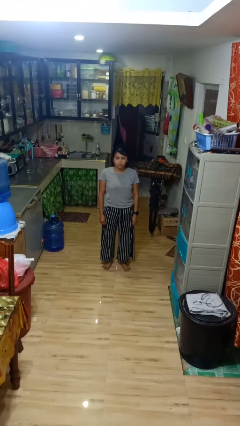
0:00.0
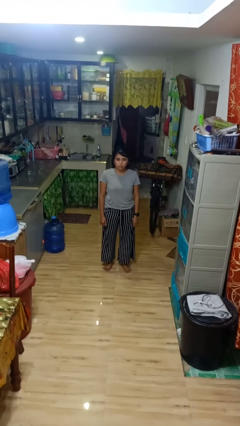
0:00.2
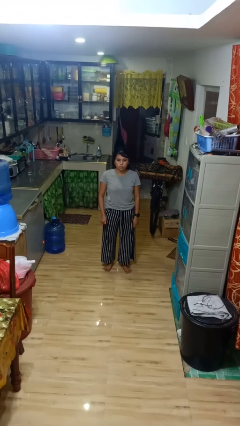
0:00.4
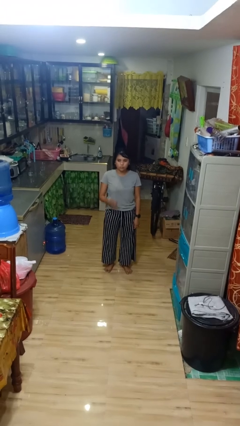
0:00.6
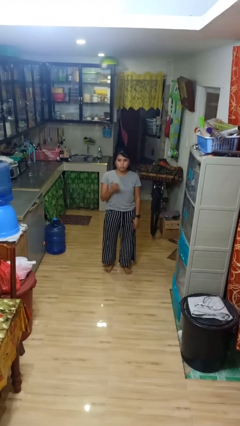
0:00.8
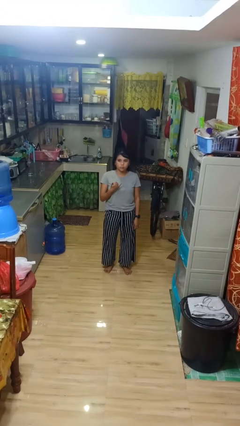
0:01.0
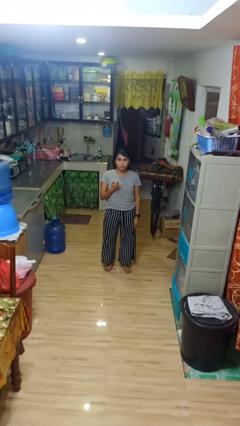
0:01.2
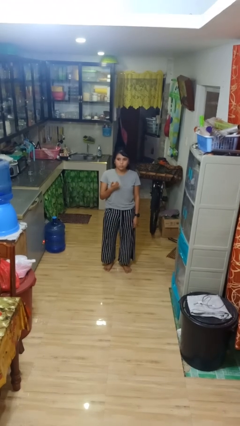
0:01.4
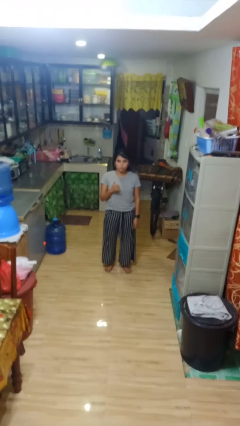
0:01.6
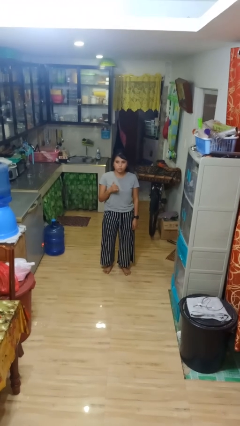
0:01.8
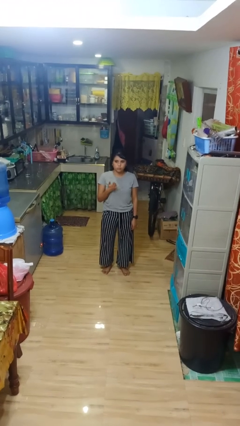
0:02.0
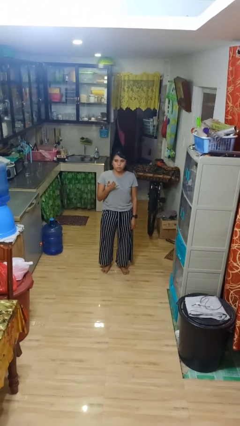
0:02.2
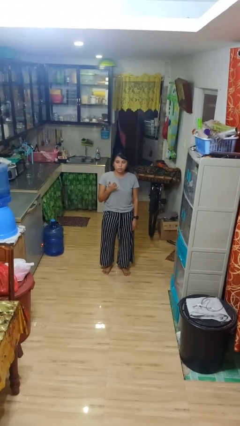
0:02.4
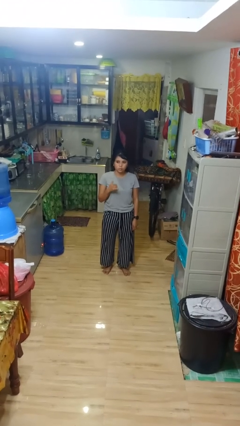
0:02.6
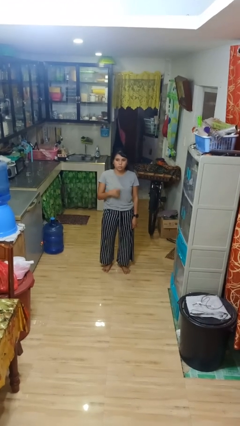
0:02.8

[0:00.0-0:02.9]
person gestures hang loose

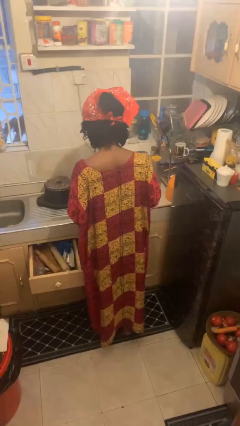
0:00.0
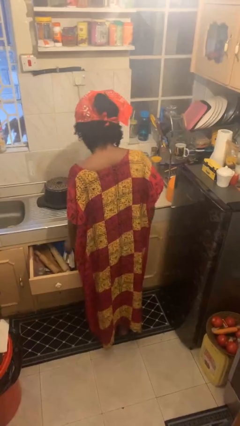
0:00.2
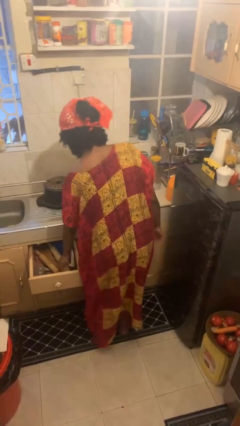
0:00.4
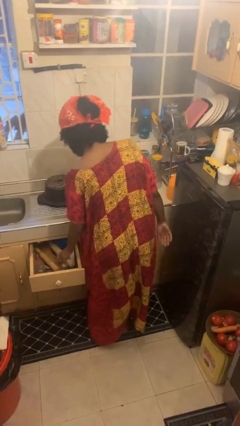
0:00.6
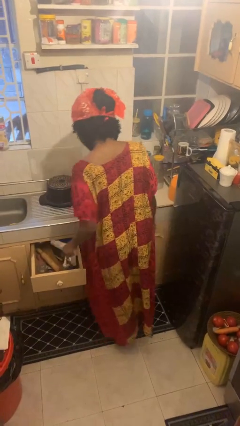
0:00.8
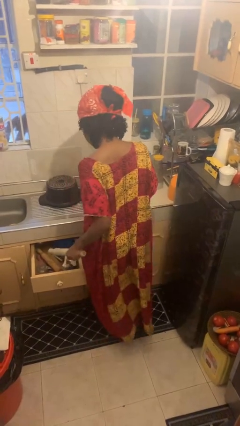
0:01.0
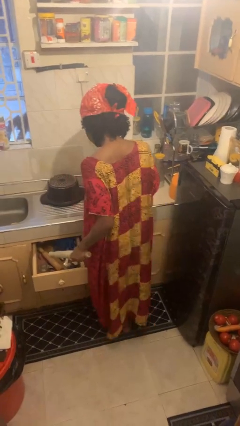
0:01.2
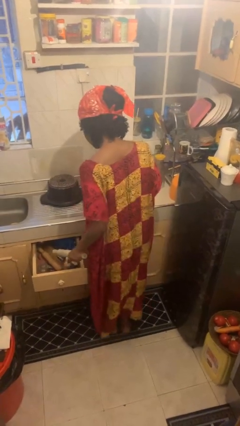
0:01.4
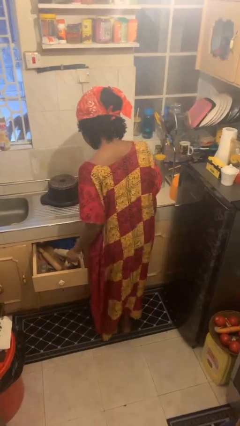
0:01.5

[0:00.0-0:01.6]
person takes object from kitchen drawer

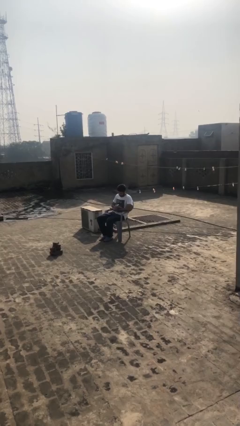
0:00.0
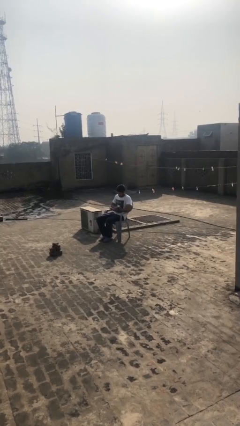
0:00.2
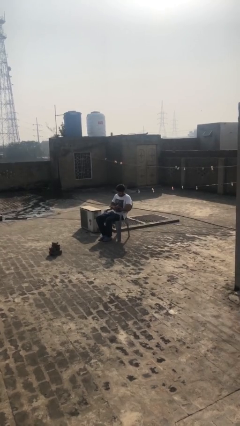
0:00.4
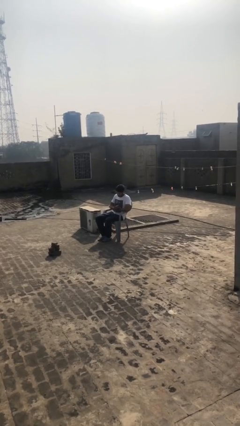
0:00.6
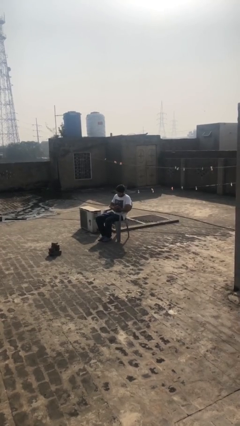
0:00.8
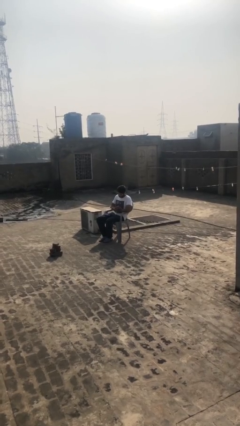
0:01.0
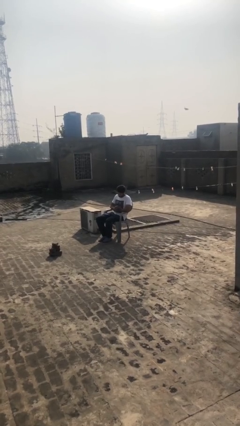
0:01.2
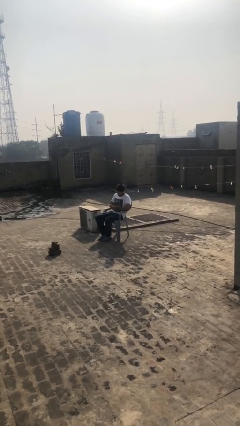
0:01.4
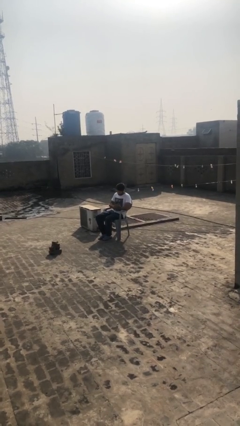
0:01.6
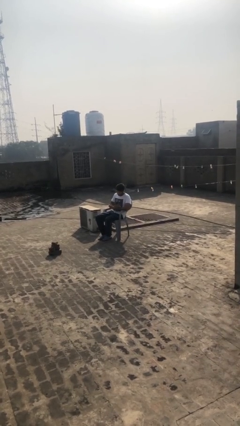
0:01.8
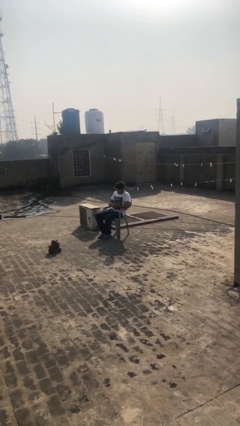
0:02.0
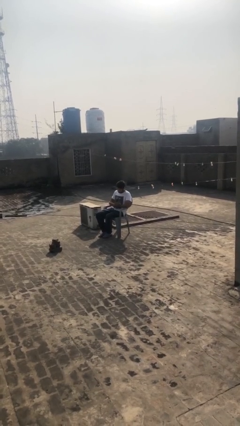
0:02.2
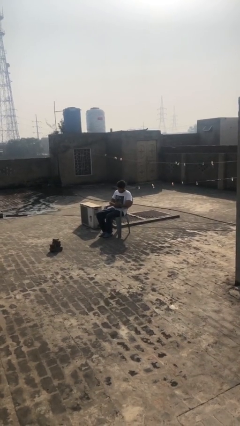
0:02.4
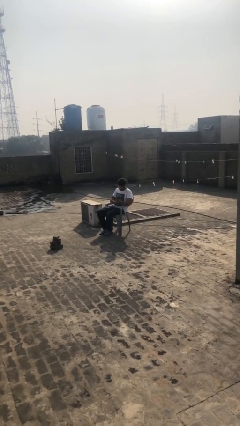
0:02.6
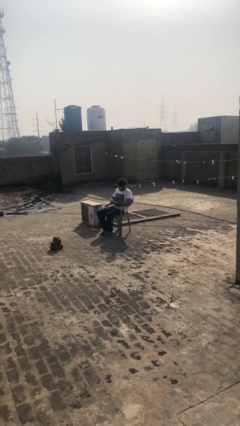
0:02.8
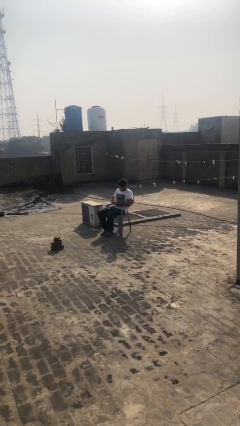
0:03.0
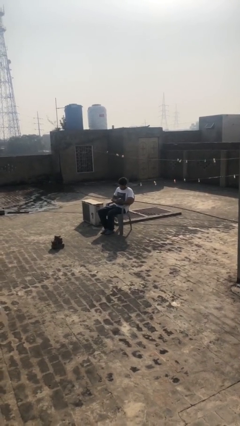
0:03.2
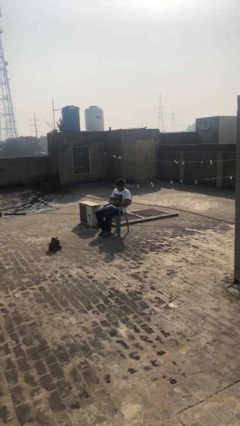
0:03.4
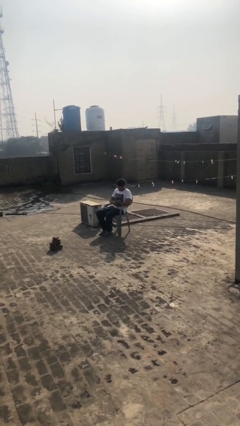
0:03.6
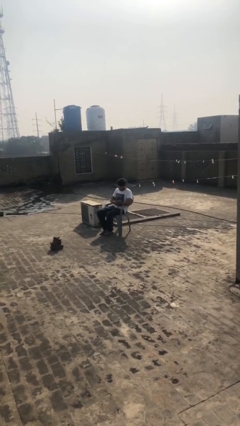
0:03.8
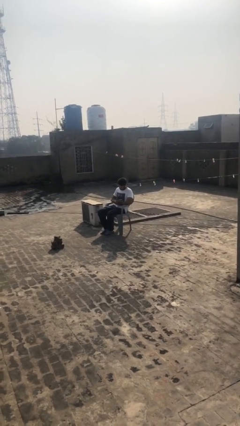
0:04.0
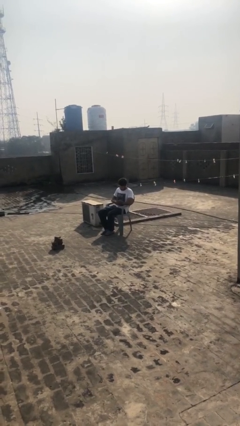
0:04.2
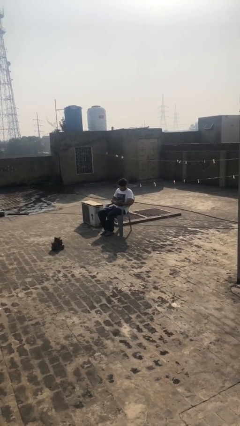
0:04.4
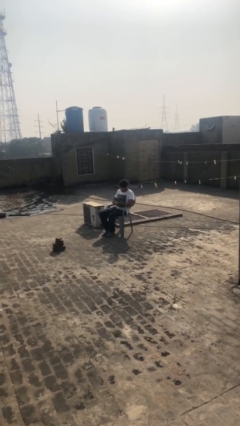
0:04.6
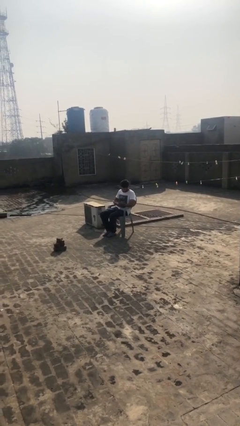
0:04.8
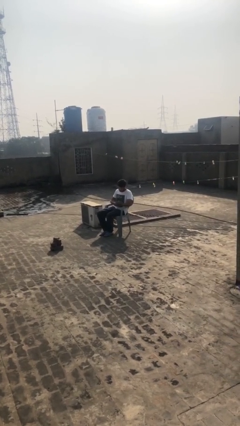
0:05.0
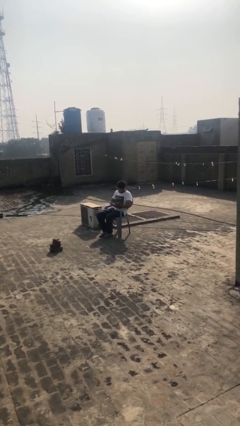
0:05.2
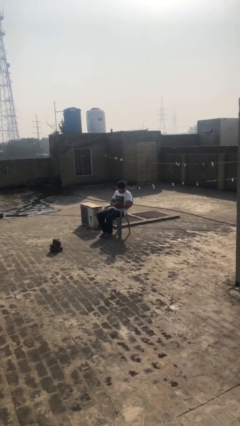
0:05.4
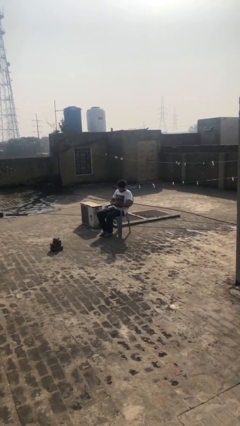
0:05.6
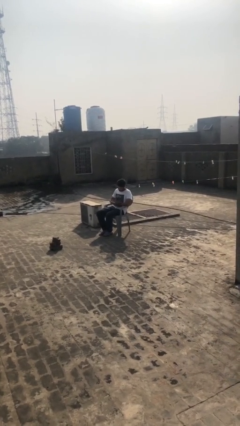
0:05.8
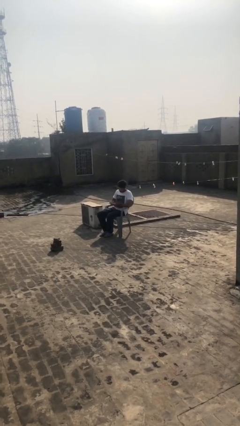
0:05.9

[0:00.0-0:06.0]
person reads document

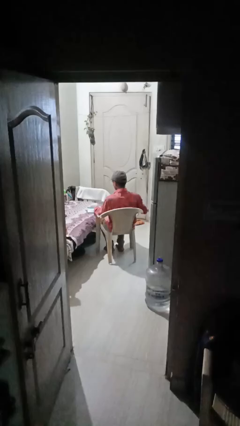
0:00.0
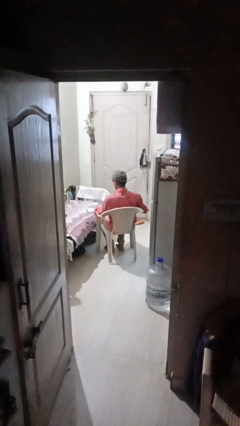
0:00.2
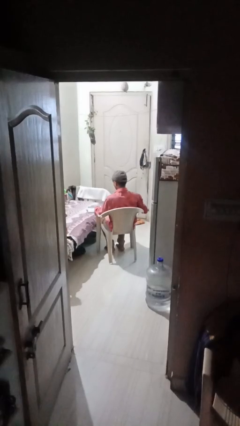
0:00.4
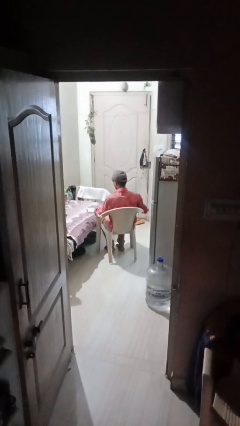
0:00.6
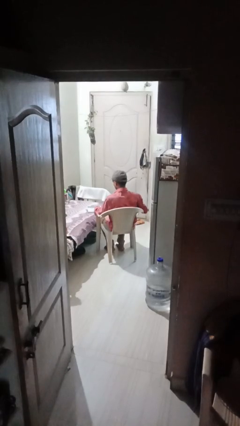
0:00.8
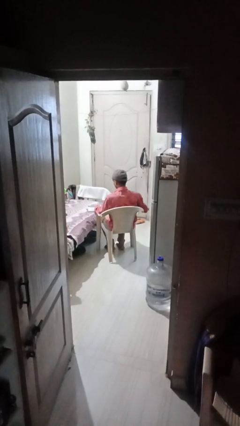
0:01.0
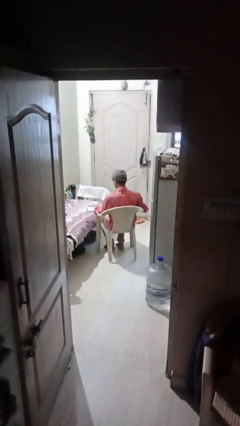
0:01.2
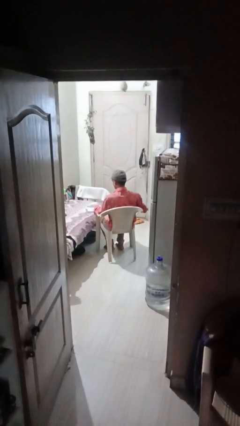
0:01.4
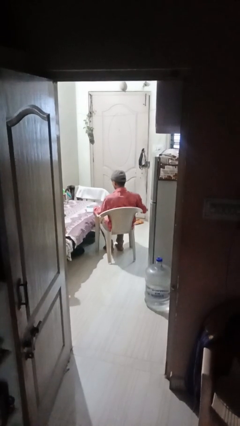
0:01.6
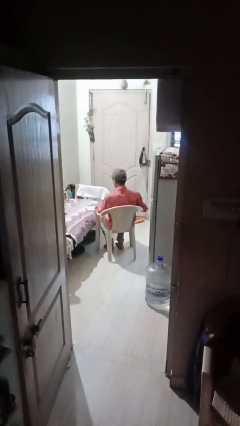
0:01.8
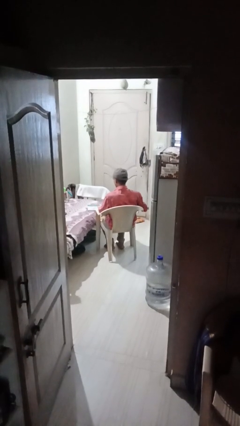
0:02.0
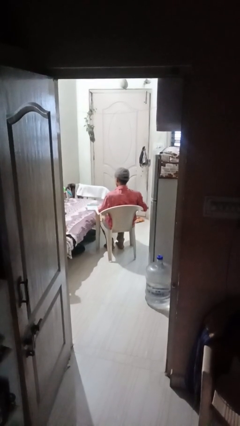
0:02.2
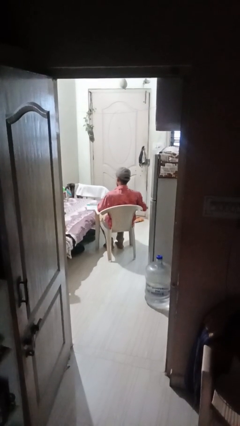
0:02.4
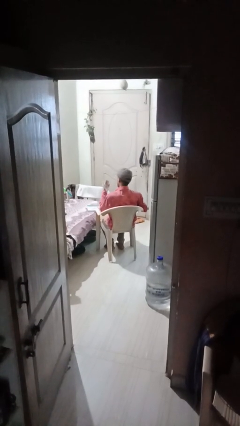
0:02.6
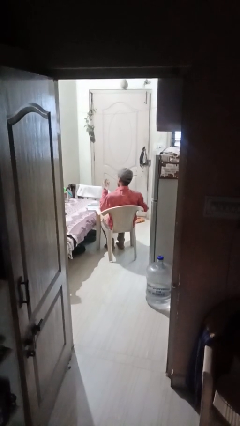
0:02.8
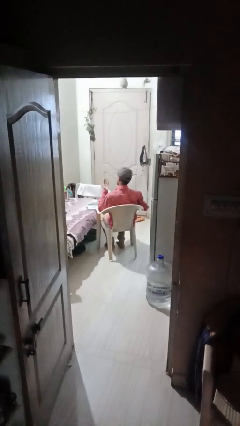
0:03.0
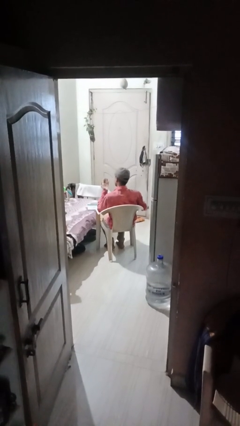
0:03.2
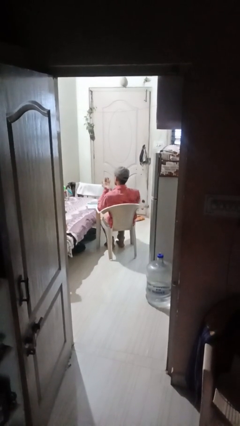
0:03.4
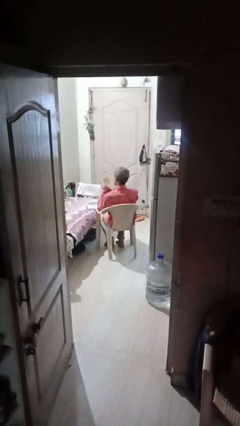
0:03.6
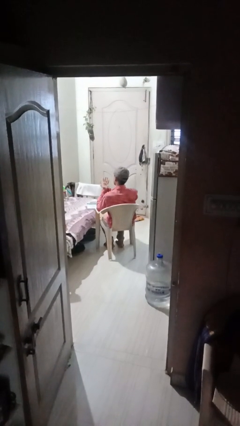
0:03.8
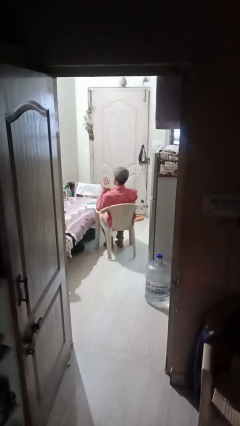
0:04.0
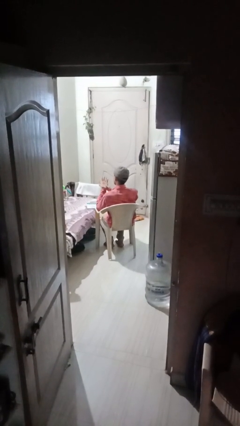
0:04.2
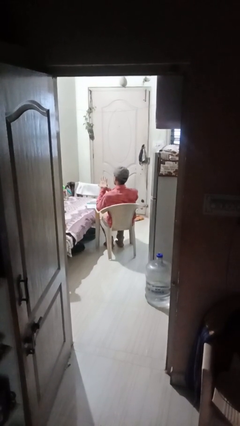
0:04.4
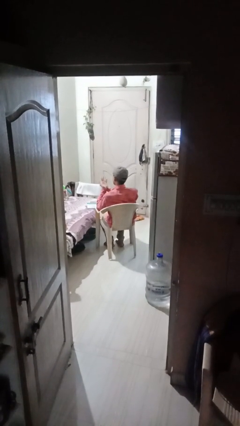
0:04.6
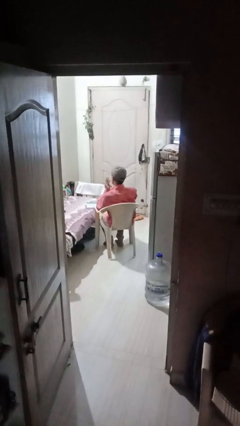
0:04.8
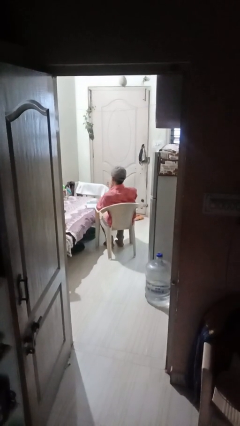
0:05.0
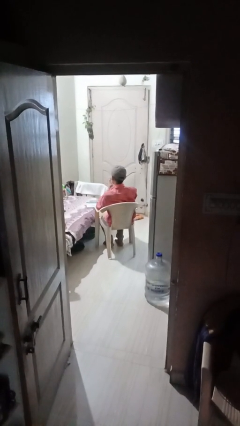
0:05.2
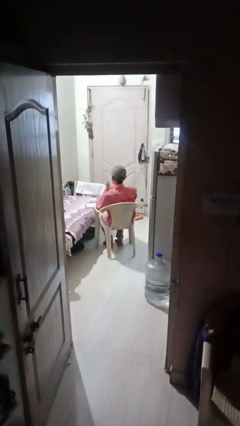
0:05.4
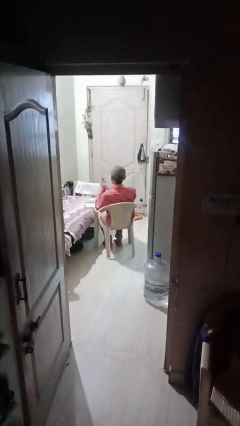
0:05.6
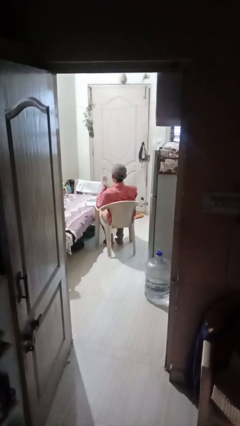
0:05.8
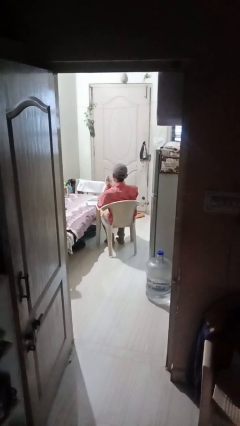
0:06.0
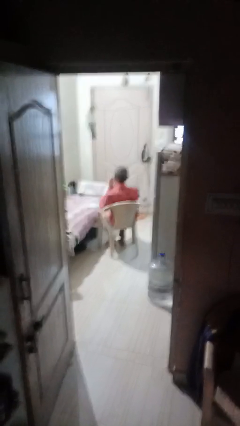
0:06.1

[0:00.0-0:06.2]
person looks at hands in lap

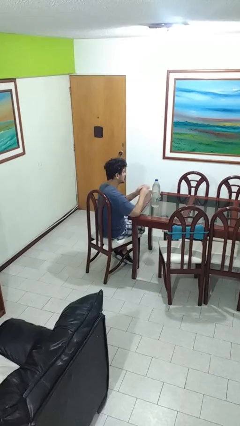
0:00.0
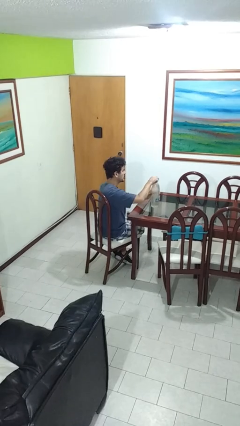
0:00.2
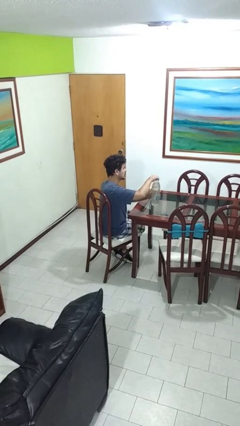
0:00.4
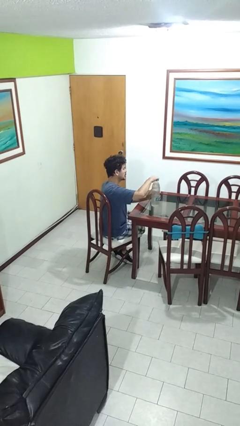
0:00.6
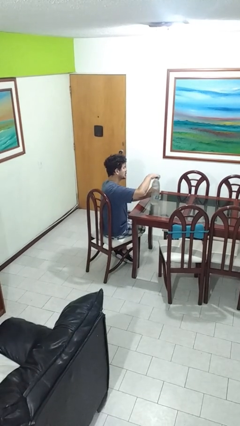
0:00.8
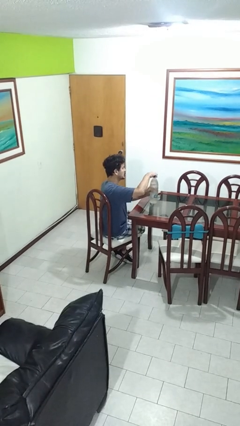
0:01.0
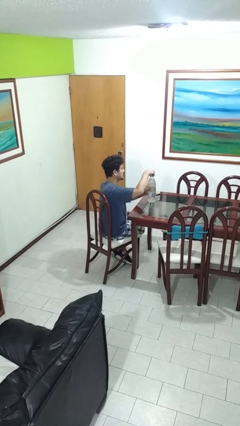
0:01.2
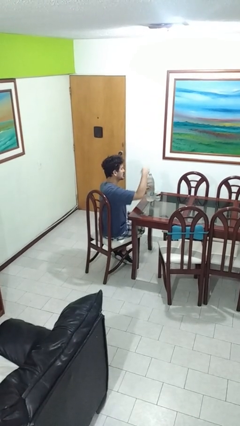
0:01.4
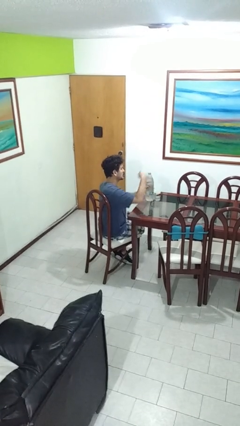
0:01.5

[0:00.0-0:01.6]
person unscrews lid from bottle
